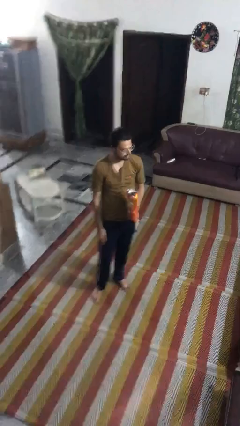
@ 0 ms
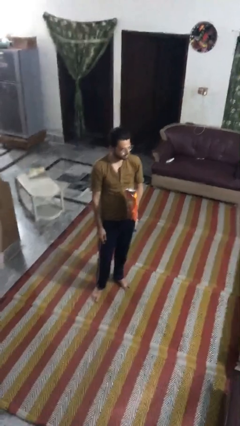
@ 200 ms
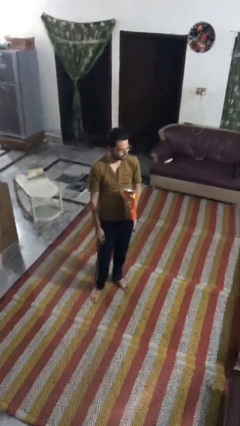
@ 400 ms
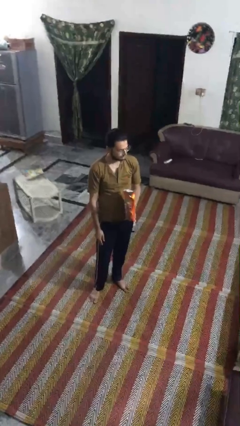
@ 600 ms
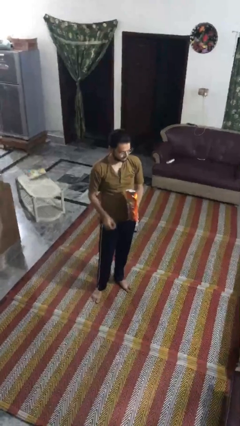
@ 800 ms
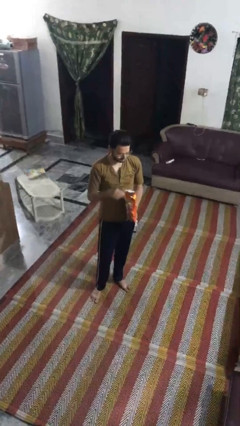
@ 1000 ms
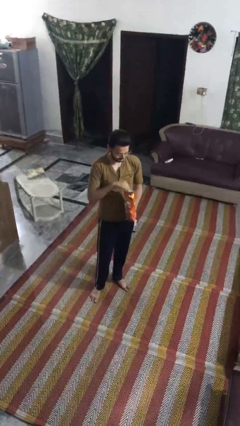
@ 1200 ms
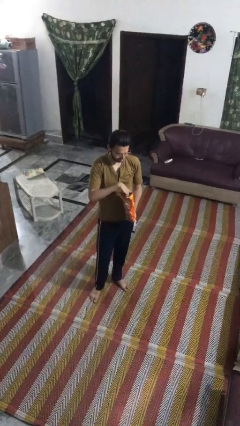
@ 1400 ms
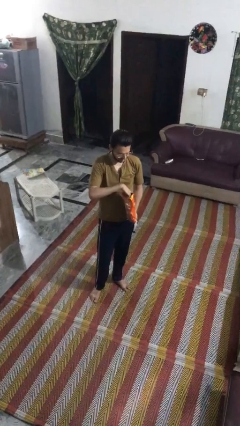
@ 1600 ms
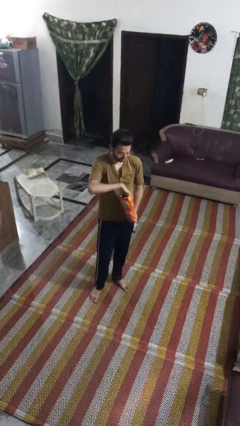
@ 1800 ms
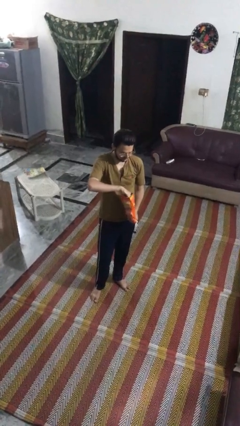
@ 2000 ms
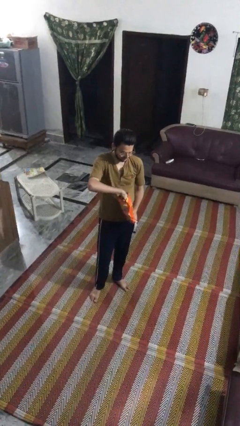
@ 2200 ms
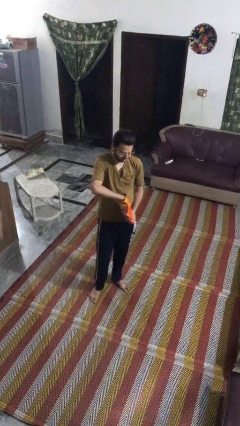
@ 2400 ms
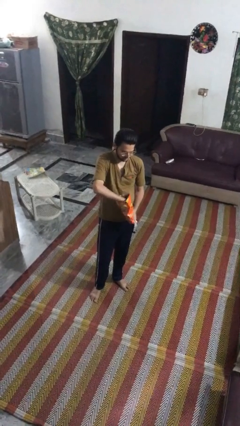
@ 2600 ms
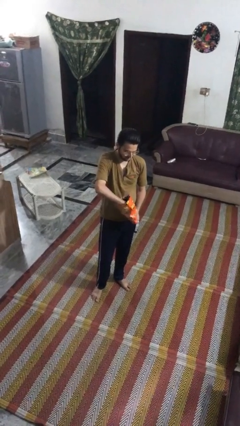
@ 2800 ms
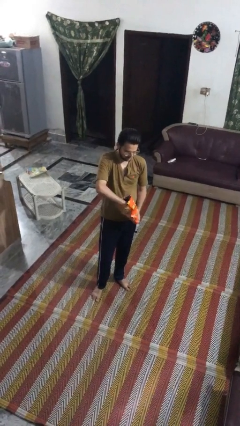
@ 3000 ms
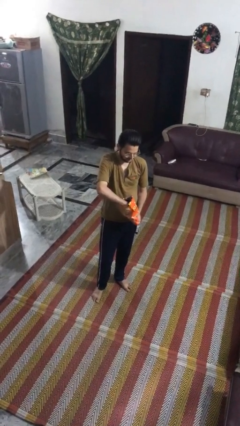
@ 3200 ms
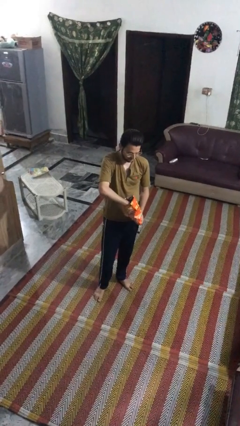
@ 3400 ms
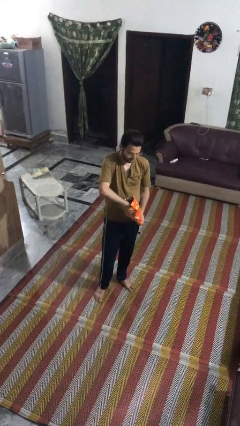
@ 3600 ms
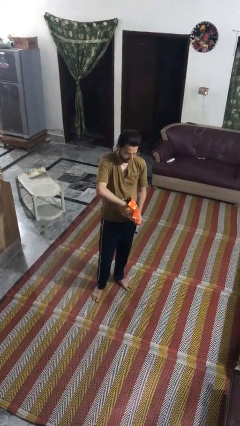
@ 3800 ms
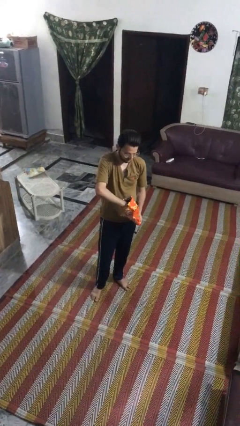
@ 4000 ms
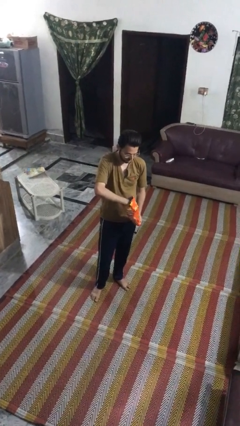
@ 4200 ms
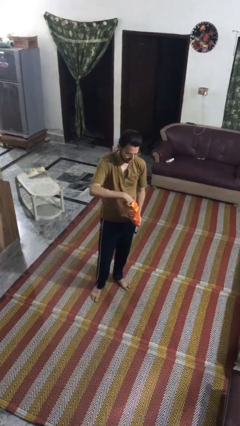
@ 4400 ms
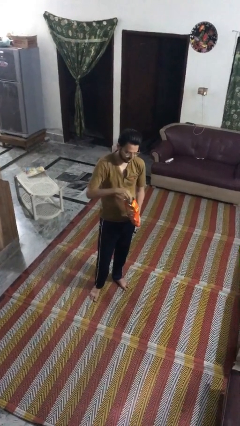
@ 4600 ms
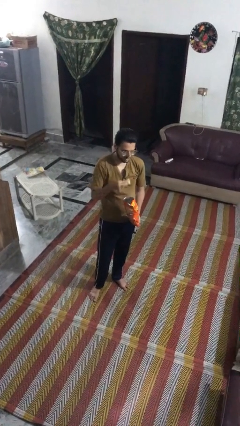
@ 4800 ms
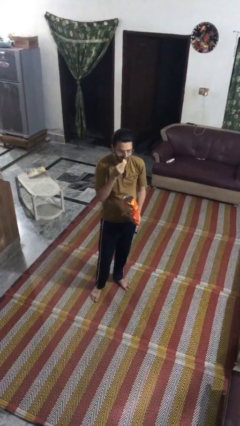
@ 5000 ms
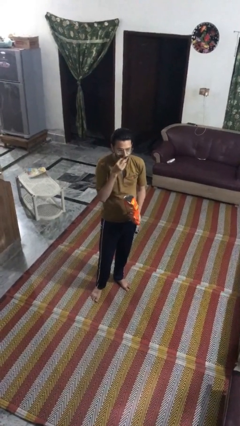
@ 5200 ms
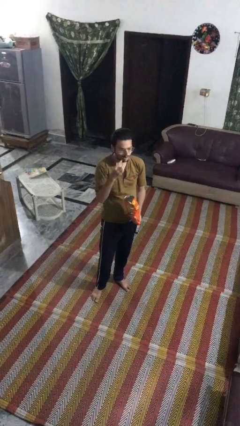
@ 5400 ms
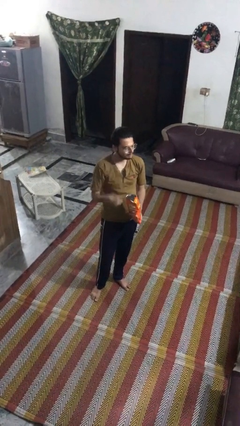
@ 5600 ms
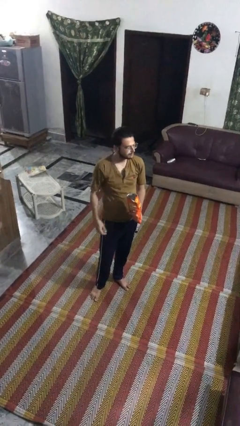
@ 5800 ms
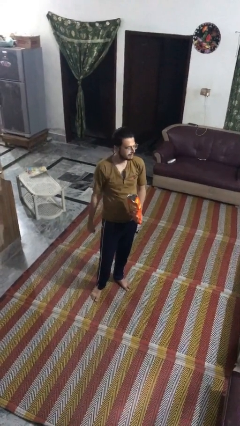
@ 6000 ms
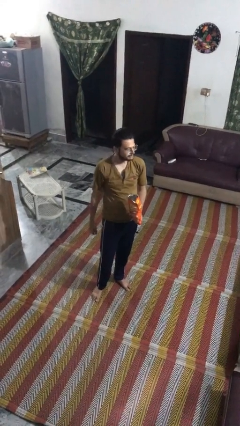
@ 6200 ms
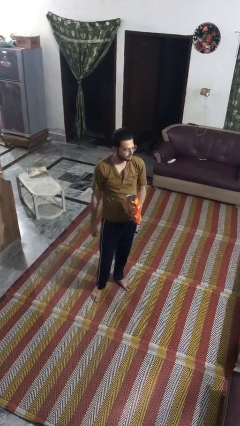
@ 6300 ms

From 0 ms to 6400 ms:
person eats snack from bag

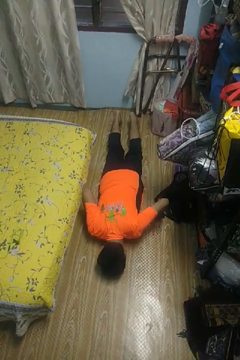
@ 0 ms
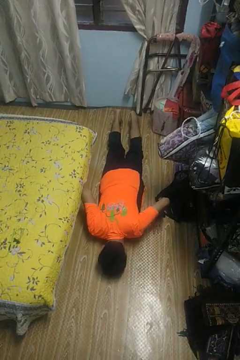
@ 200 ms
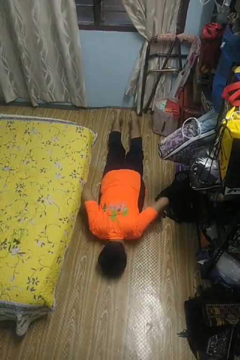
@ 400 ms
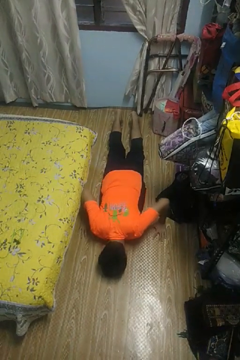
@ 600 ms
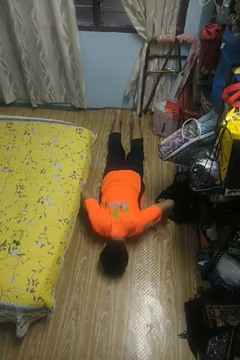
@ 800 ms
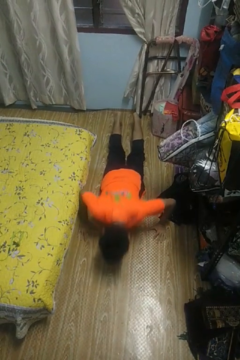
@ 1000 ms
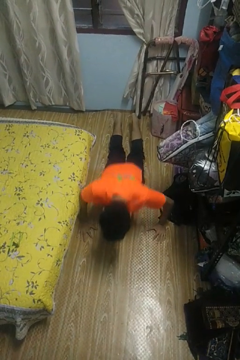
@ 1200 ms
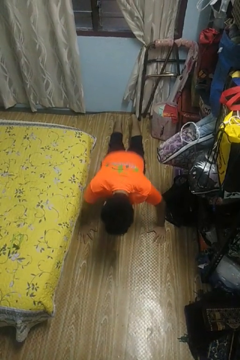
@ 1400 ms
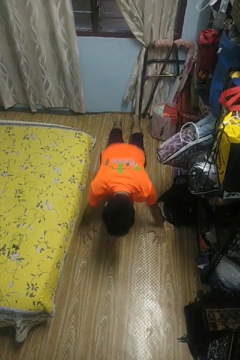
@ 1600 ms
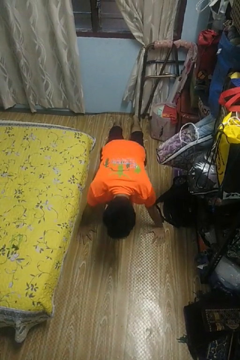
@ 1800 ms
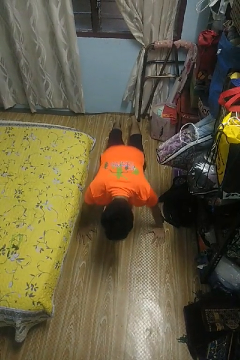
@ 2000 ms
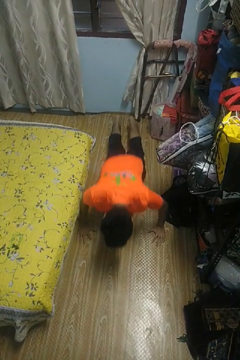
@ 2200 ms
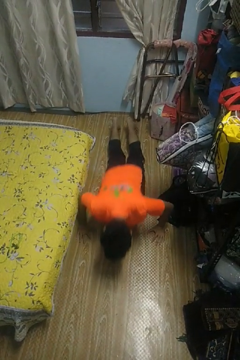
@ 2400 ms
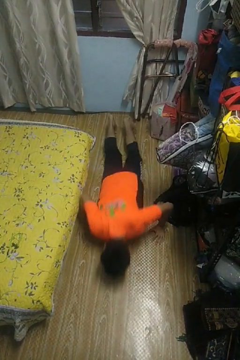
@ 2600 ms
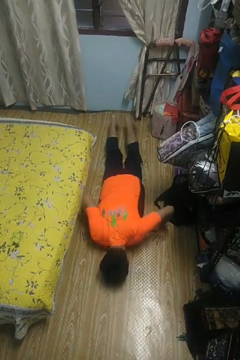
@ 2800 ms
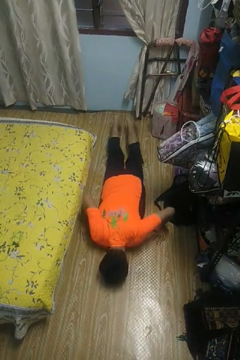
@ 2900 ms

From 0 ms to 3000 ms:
person exercises with pushup

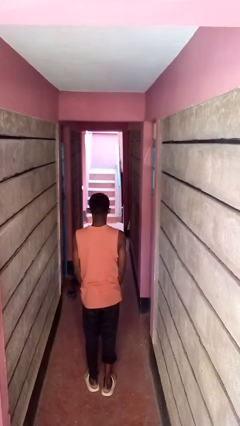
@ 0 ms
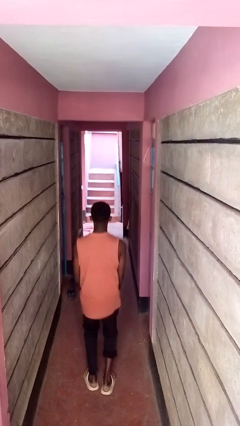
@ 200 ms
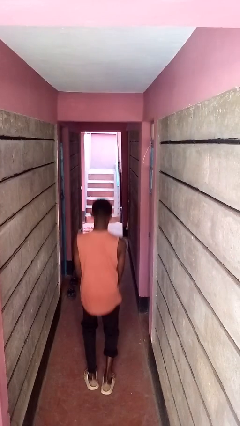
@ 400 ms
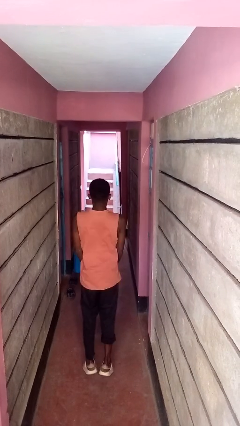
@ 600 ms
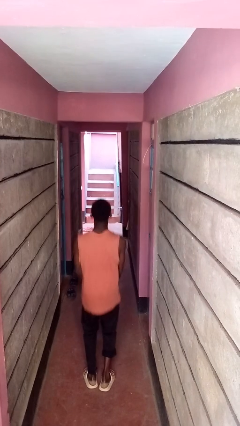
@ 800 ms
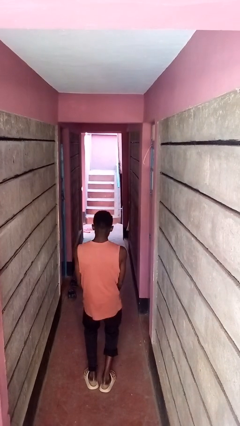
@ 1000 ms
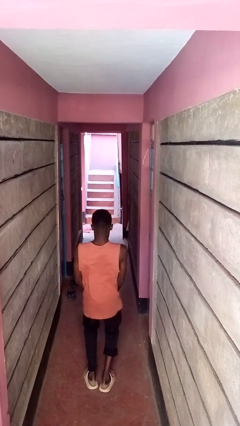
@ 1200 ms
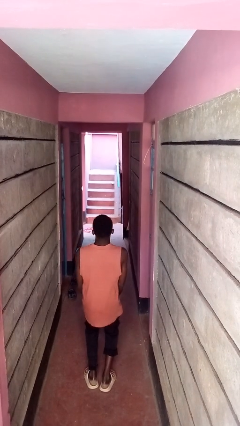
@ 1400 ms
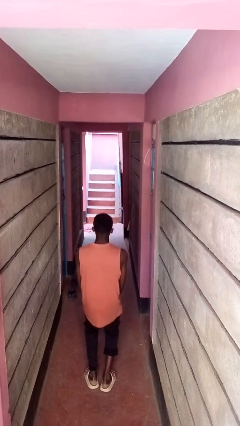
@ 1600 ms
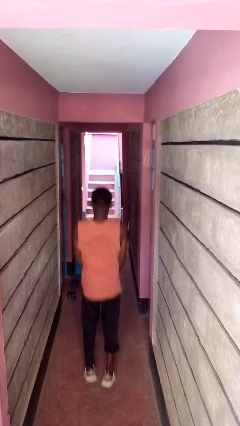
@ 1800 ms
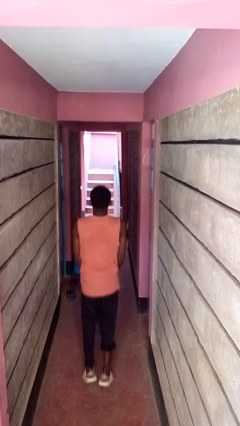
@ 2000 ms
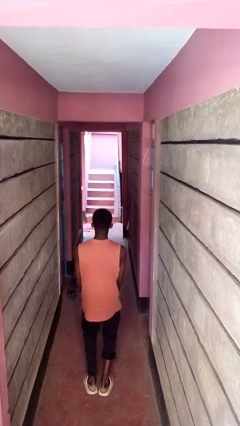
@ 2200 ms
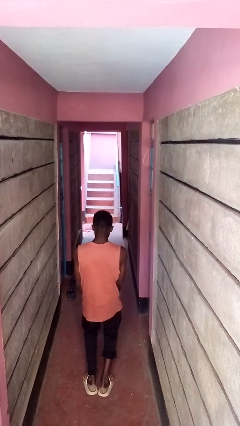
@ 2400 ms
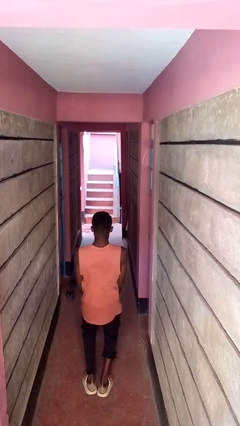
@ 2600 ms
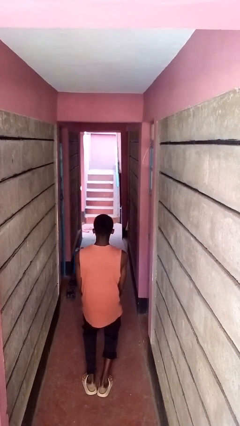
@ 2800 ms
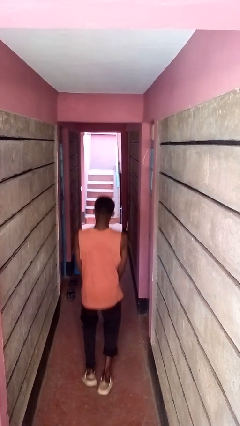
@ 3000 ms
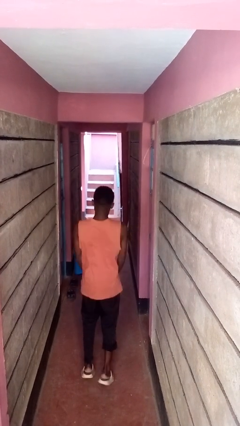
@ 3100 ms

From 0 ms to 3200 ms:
person dances in place

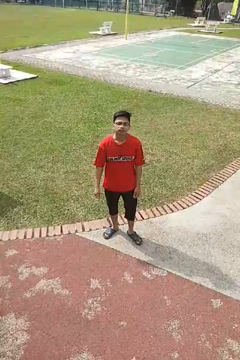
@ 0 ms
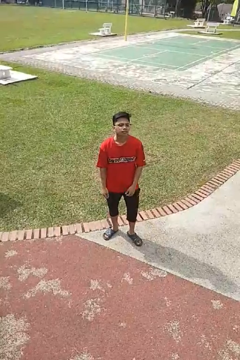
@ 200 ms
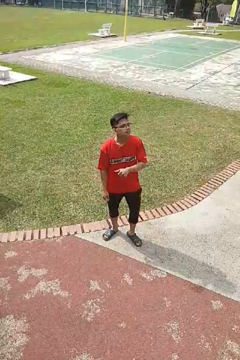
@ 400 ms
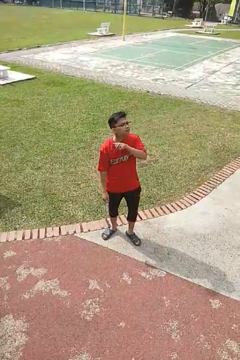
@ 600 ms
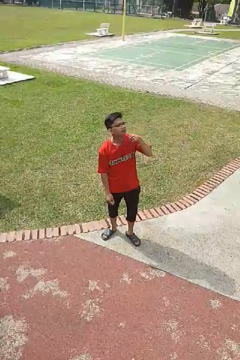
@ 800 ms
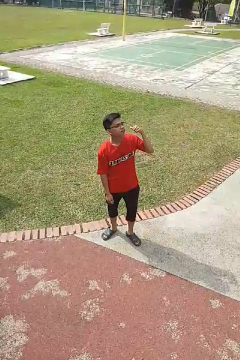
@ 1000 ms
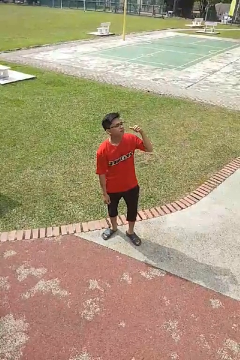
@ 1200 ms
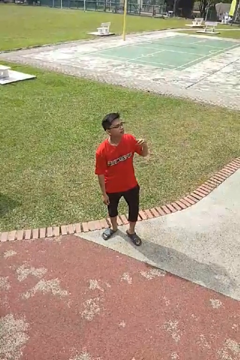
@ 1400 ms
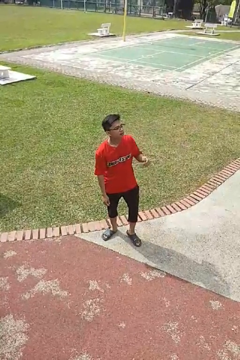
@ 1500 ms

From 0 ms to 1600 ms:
person gestures cut

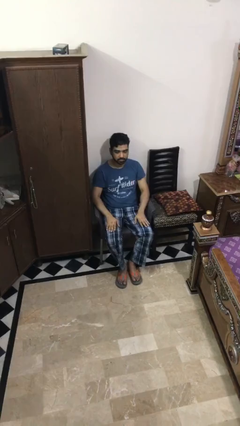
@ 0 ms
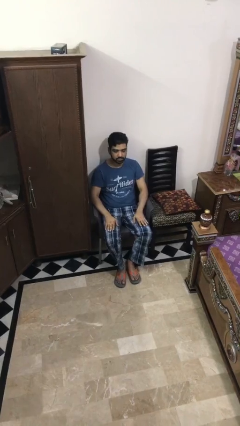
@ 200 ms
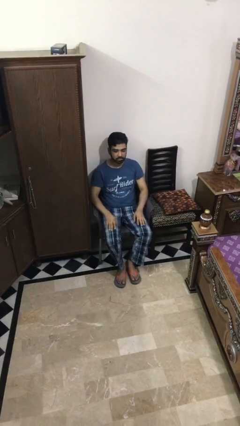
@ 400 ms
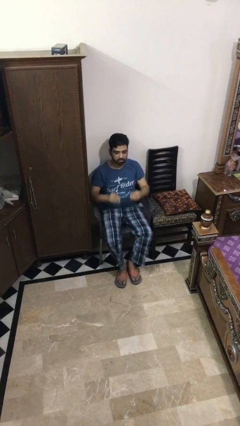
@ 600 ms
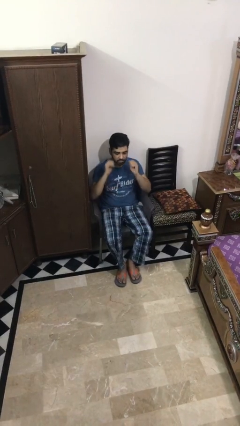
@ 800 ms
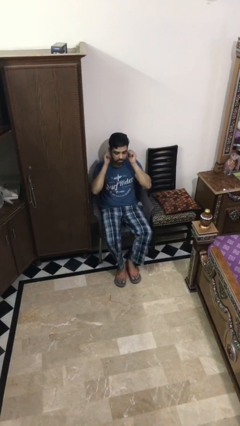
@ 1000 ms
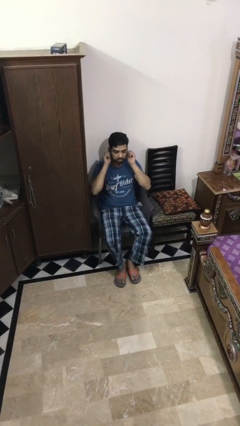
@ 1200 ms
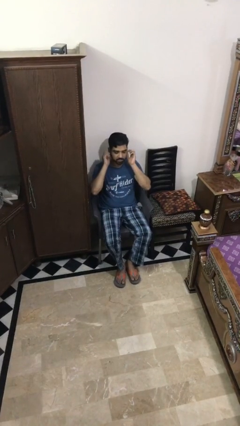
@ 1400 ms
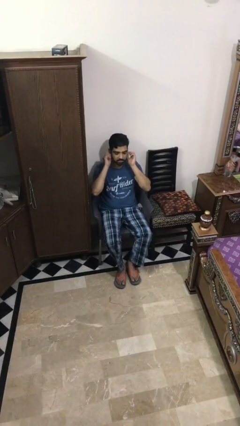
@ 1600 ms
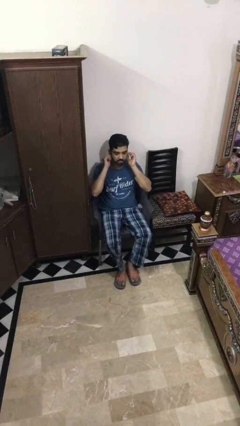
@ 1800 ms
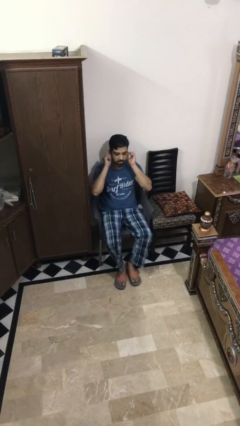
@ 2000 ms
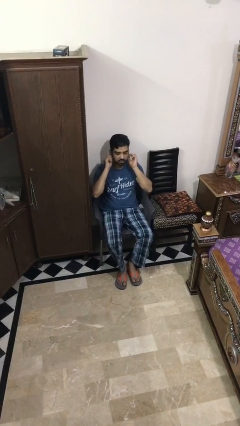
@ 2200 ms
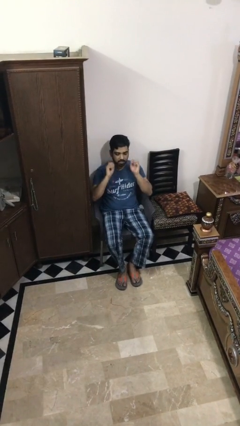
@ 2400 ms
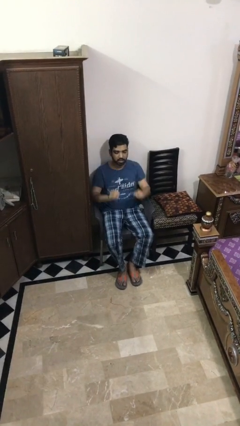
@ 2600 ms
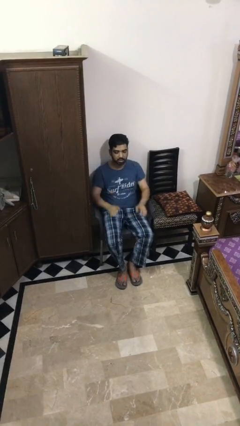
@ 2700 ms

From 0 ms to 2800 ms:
person touches earlobe

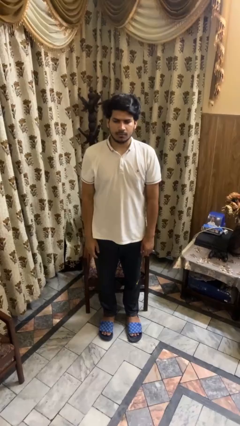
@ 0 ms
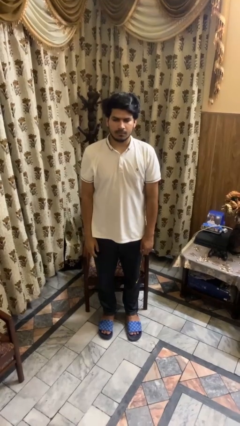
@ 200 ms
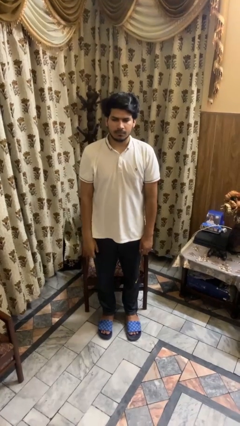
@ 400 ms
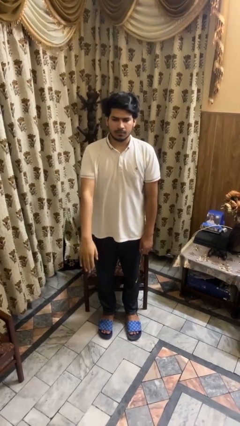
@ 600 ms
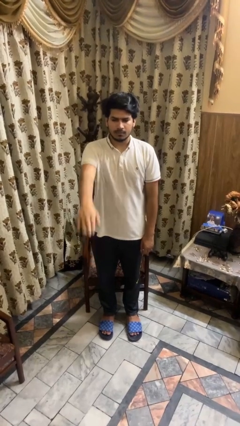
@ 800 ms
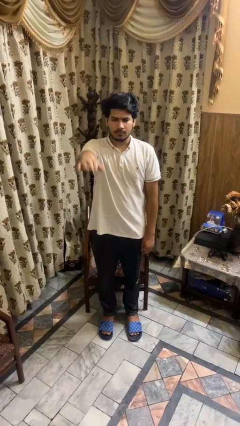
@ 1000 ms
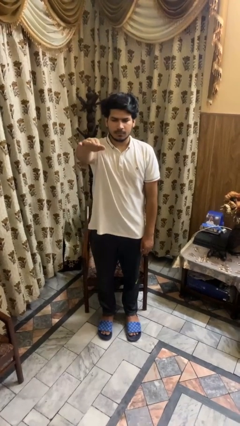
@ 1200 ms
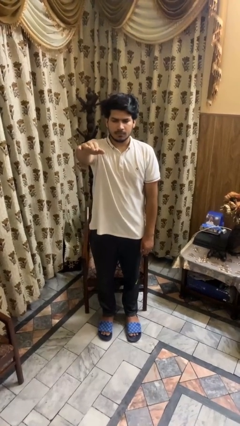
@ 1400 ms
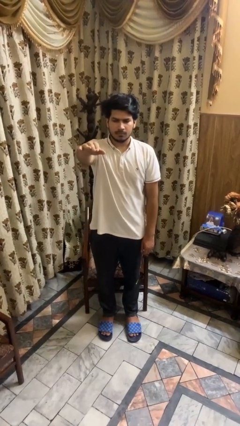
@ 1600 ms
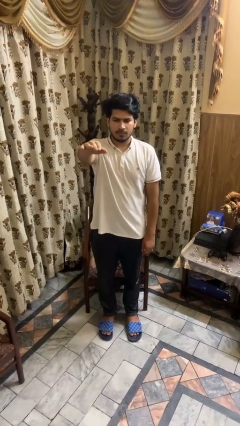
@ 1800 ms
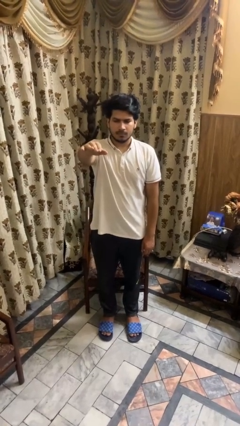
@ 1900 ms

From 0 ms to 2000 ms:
person gestures swipe up
